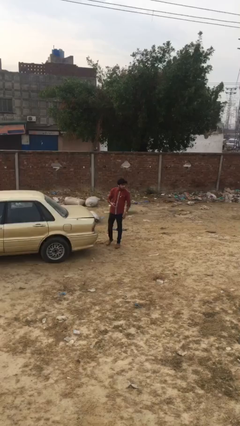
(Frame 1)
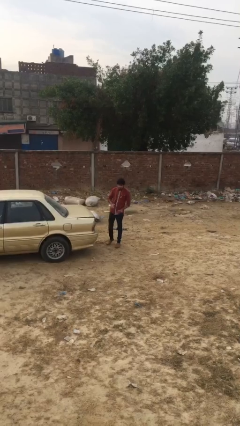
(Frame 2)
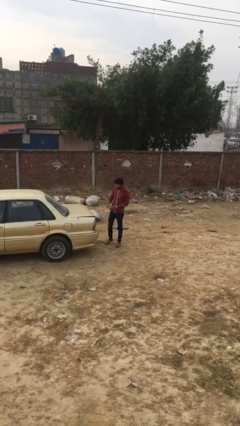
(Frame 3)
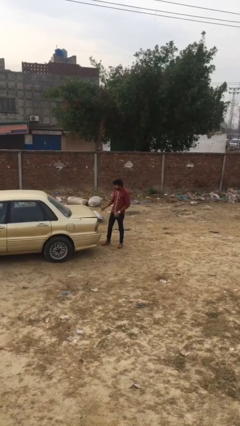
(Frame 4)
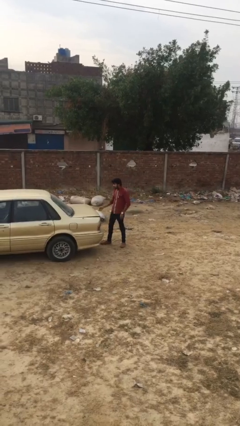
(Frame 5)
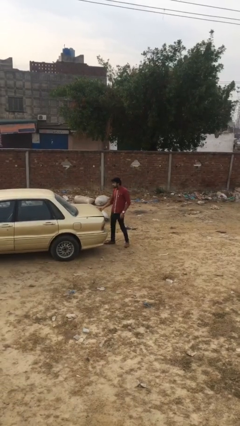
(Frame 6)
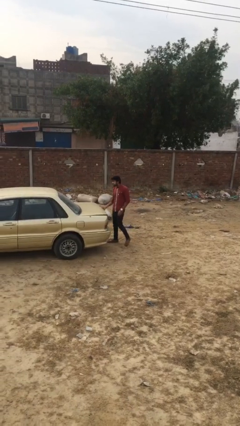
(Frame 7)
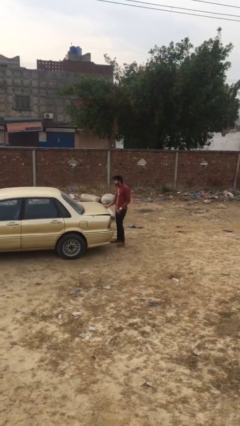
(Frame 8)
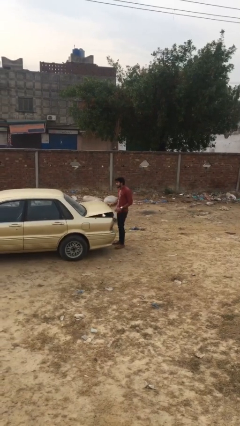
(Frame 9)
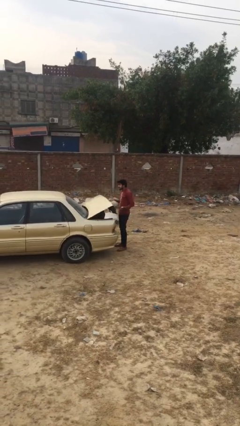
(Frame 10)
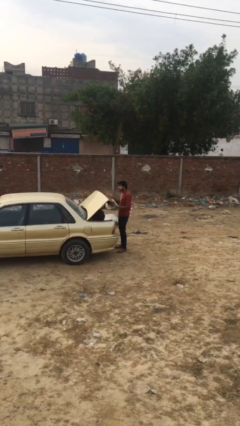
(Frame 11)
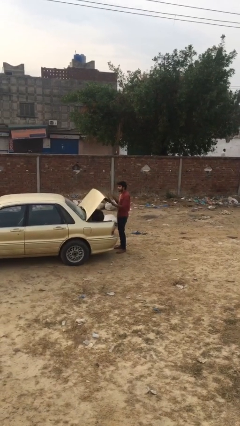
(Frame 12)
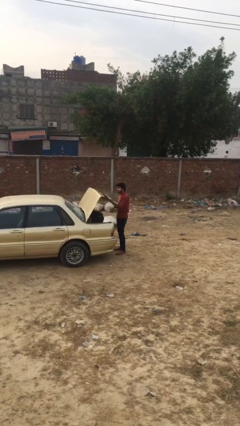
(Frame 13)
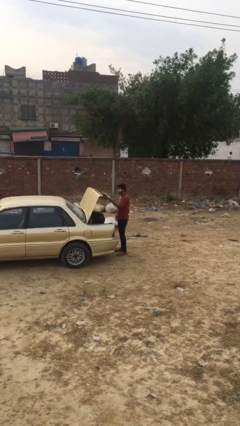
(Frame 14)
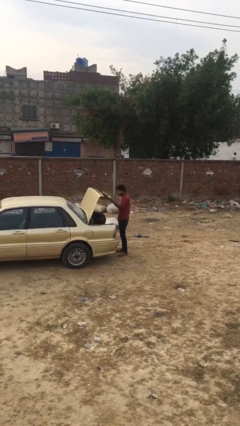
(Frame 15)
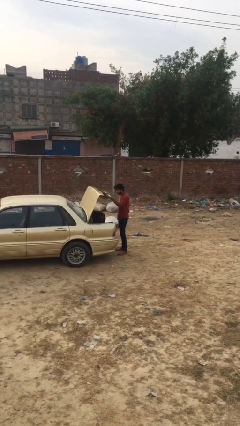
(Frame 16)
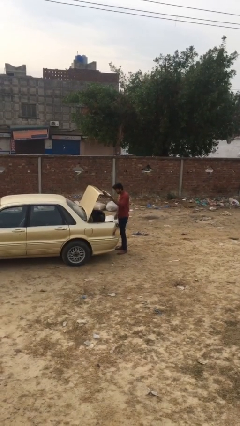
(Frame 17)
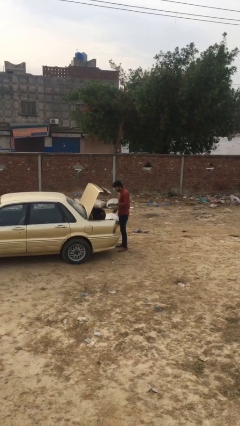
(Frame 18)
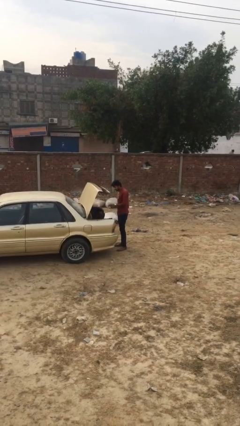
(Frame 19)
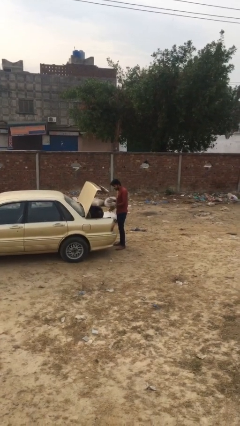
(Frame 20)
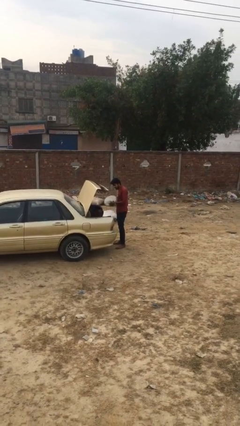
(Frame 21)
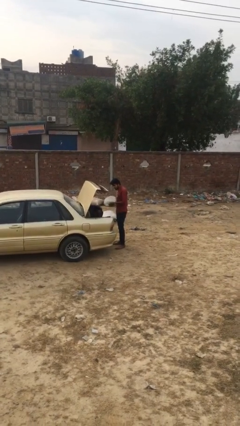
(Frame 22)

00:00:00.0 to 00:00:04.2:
person opens car trunk

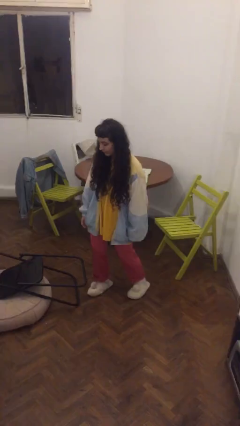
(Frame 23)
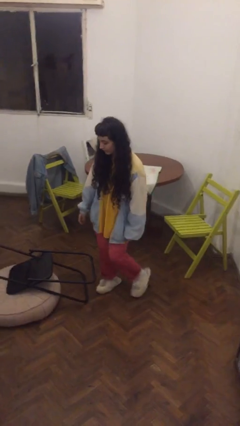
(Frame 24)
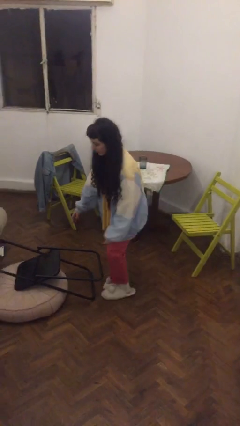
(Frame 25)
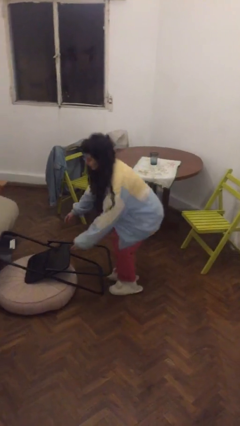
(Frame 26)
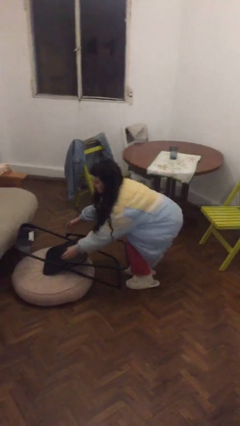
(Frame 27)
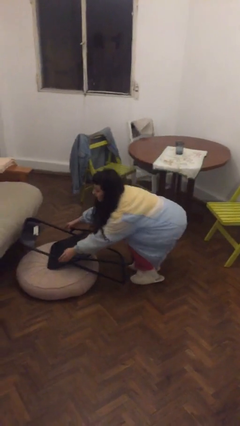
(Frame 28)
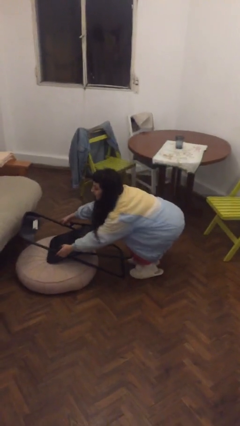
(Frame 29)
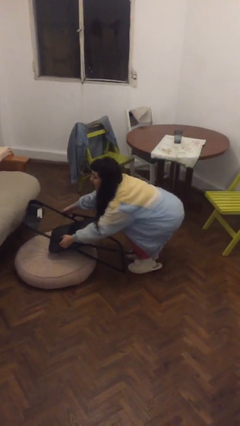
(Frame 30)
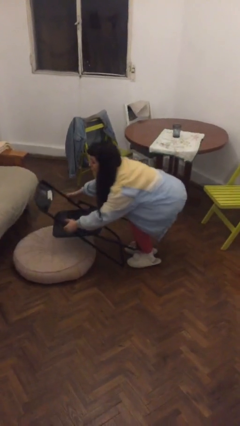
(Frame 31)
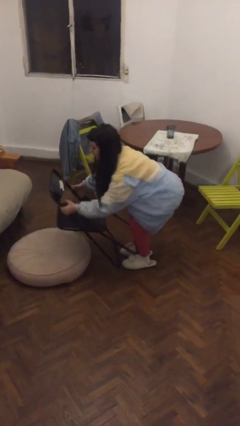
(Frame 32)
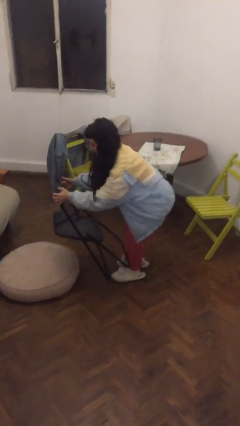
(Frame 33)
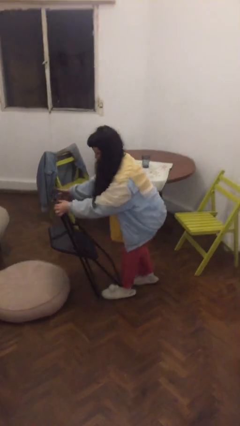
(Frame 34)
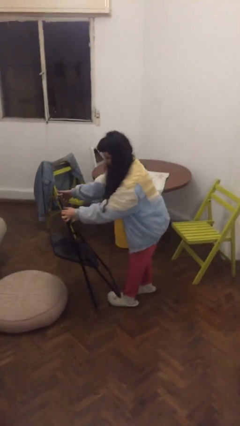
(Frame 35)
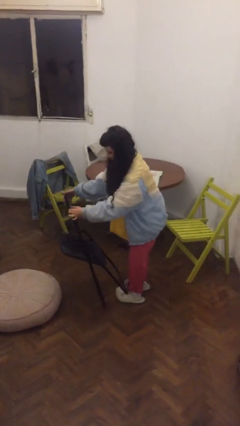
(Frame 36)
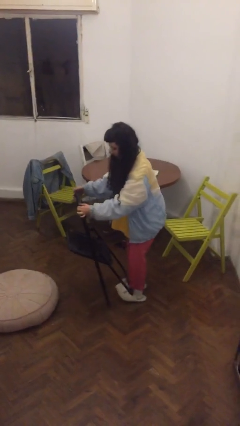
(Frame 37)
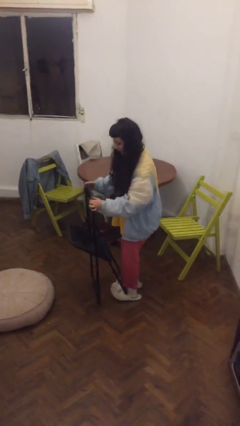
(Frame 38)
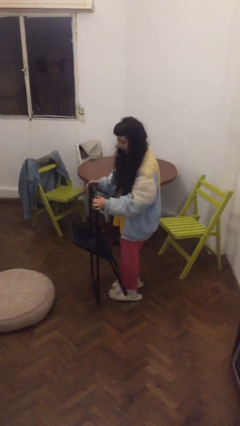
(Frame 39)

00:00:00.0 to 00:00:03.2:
person sets upright furniture

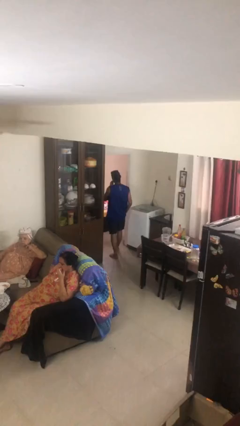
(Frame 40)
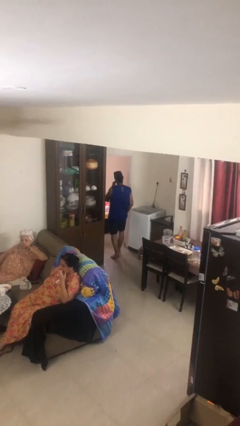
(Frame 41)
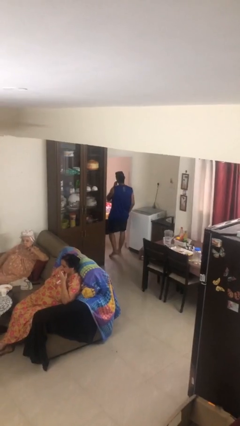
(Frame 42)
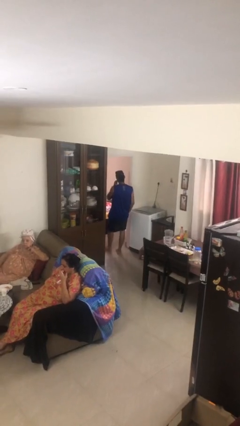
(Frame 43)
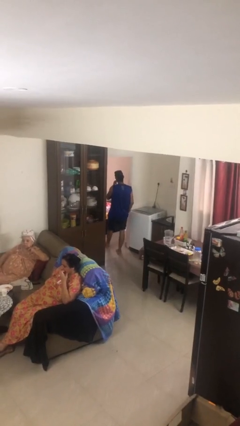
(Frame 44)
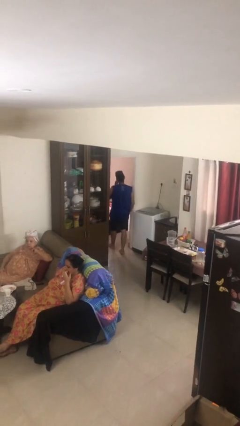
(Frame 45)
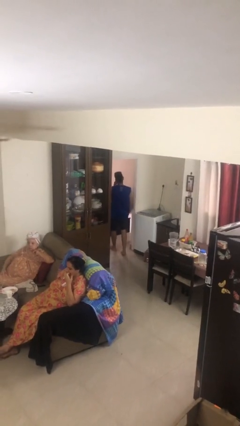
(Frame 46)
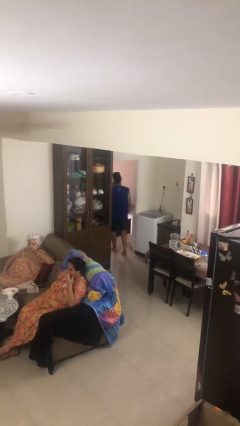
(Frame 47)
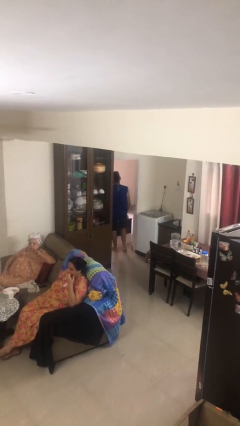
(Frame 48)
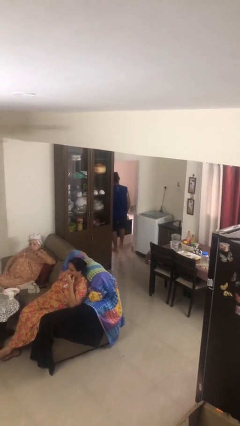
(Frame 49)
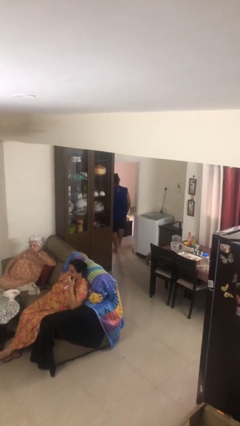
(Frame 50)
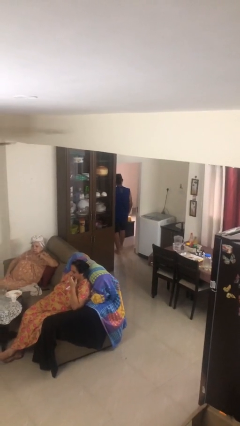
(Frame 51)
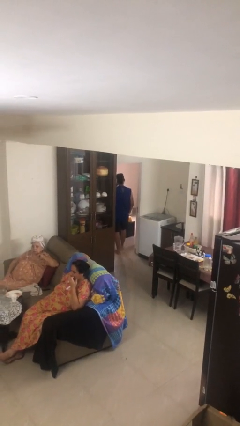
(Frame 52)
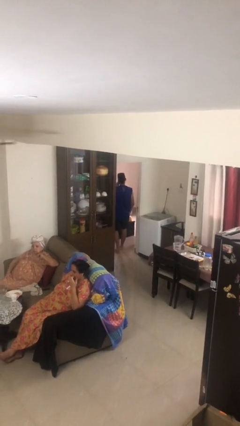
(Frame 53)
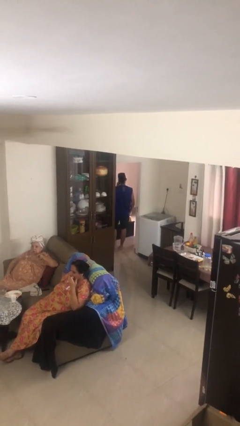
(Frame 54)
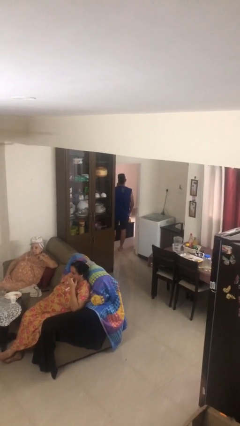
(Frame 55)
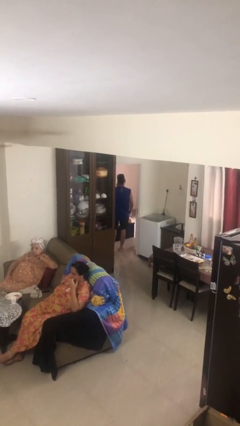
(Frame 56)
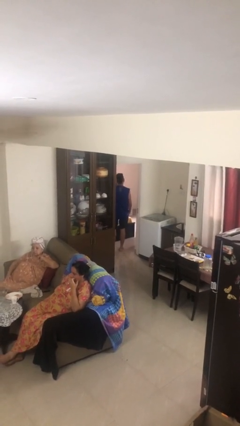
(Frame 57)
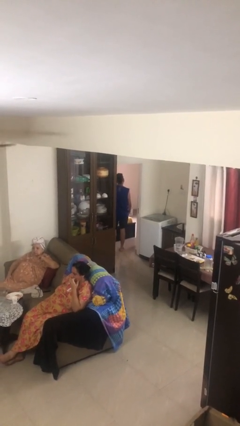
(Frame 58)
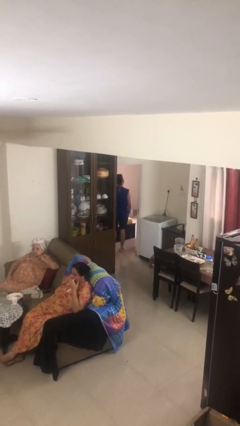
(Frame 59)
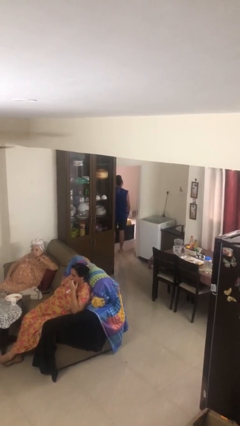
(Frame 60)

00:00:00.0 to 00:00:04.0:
person exits scene through structure

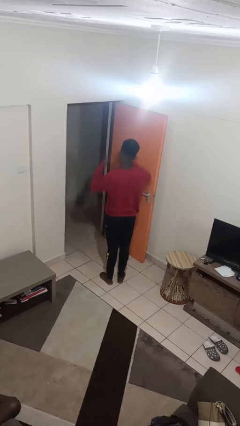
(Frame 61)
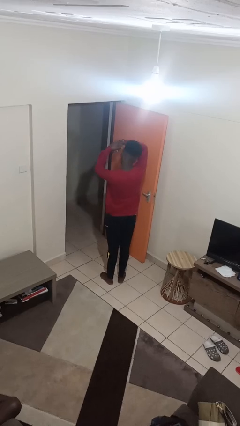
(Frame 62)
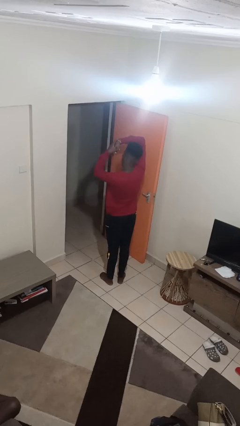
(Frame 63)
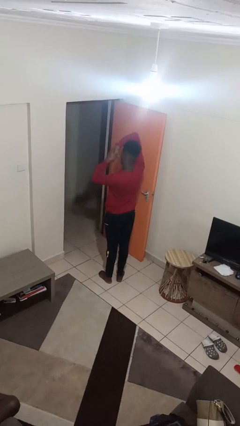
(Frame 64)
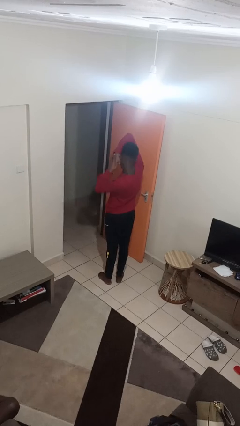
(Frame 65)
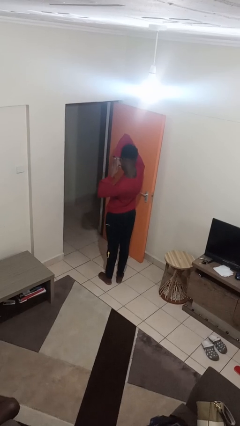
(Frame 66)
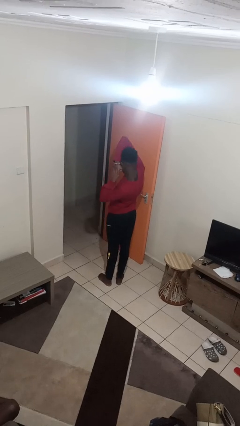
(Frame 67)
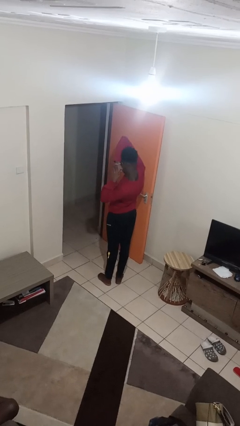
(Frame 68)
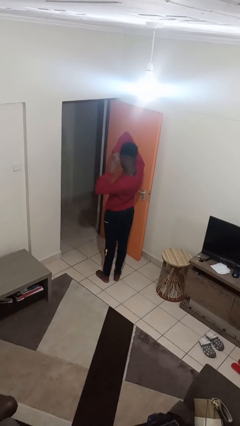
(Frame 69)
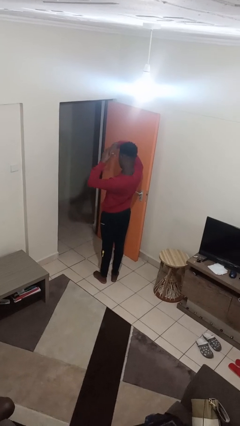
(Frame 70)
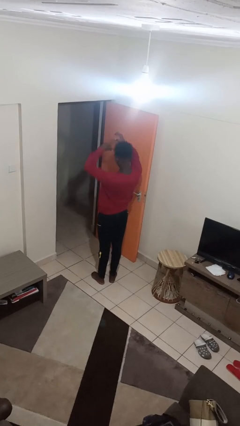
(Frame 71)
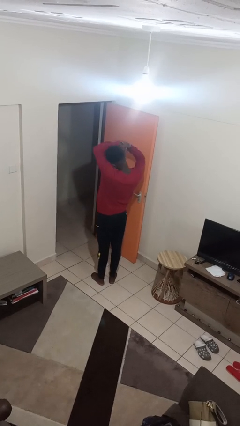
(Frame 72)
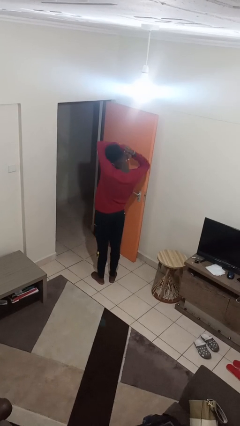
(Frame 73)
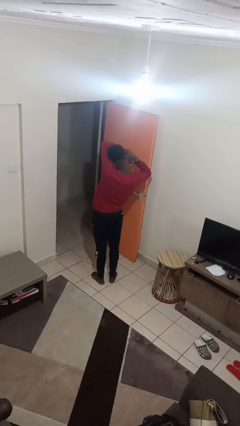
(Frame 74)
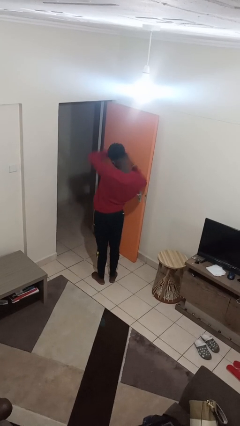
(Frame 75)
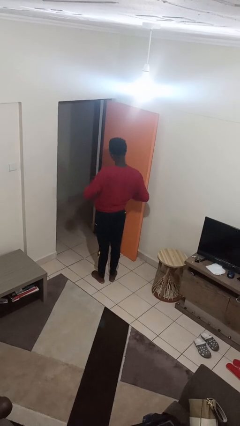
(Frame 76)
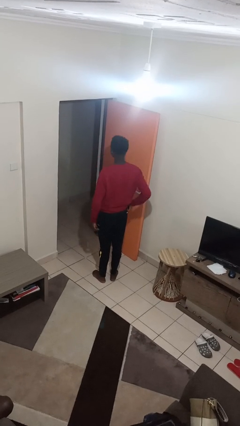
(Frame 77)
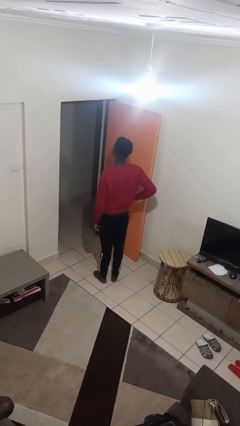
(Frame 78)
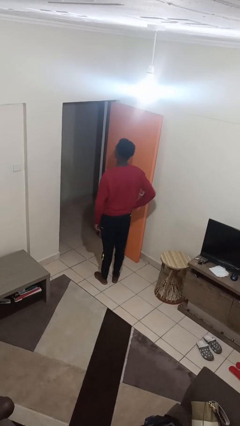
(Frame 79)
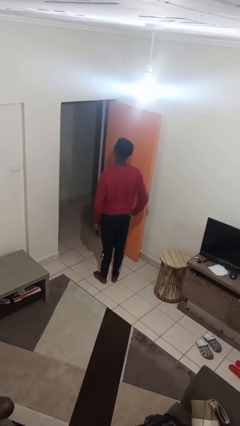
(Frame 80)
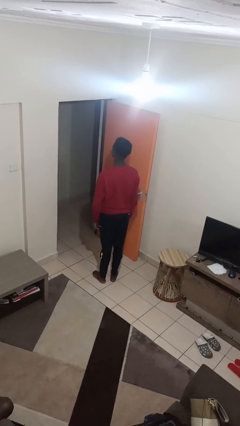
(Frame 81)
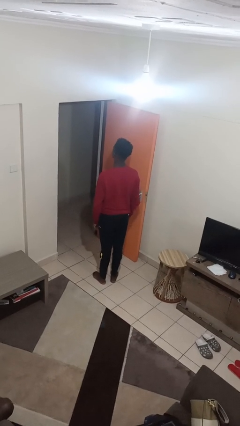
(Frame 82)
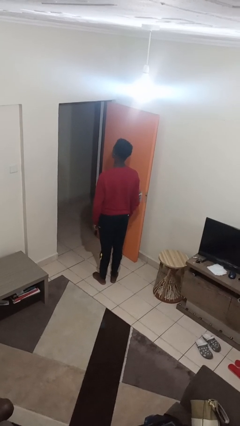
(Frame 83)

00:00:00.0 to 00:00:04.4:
person stretches arms over head

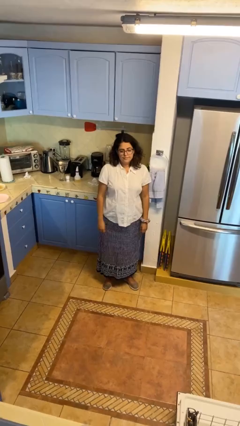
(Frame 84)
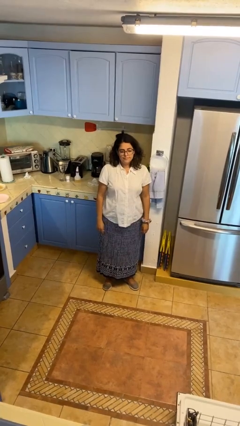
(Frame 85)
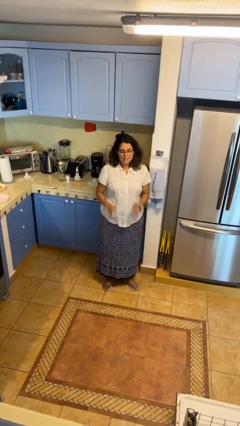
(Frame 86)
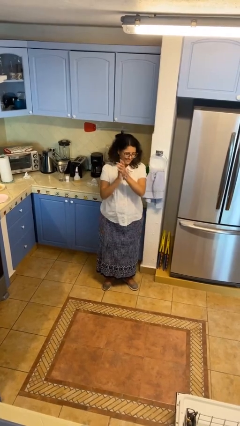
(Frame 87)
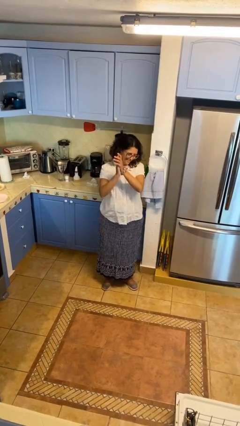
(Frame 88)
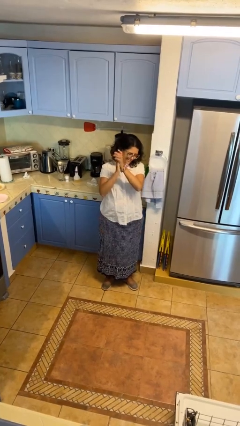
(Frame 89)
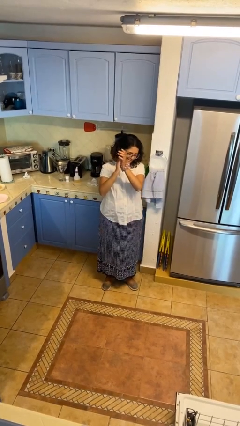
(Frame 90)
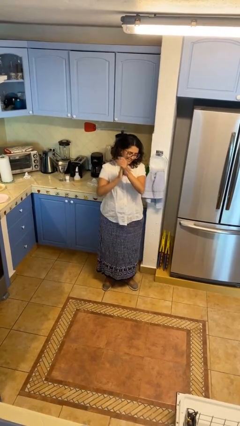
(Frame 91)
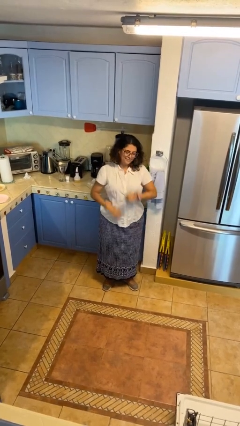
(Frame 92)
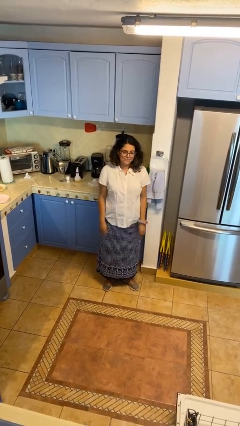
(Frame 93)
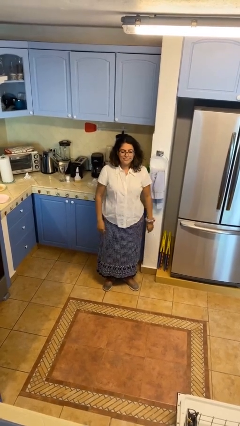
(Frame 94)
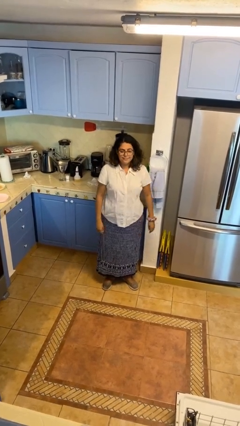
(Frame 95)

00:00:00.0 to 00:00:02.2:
person claps hands
